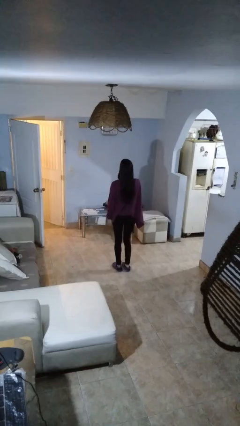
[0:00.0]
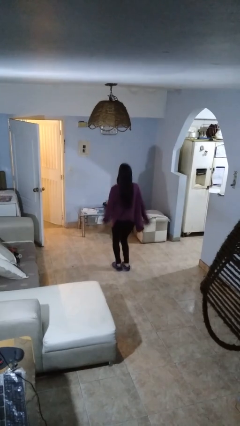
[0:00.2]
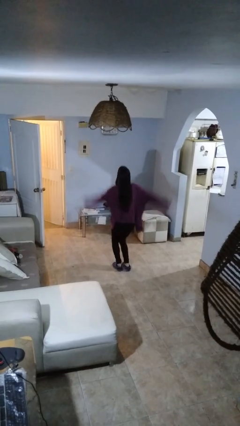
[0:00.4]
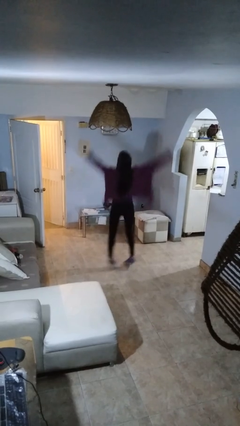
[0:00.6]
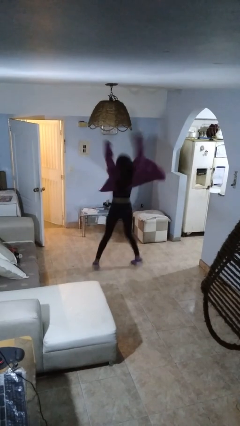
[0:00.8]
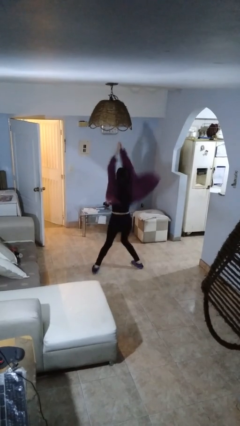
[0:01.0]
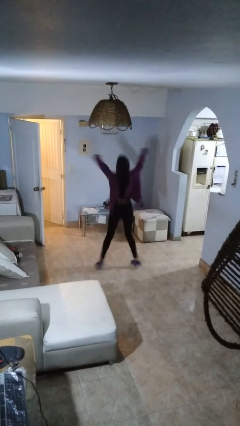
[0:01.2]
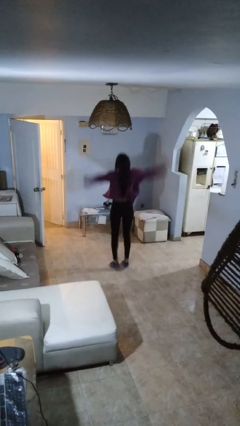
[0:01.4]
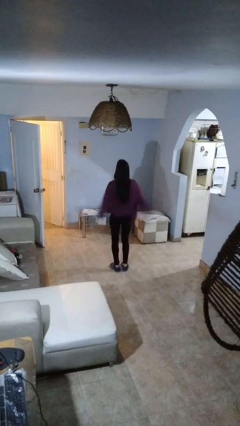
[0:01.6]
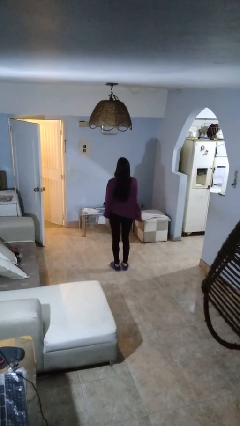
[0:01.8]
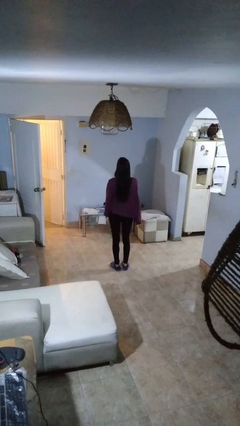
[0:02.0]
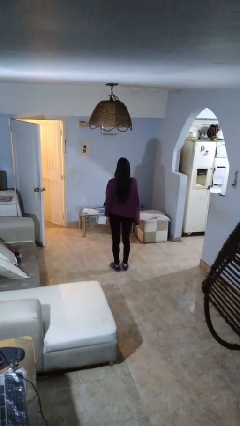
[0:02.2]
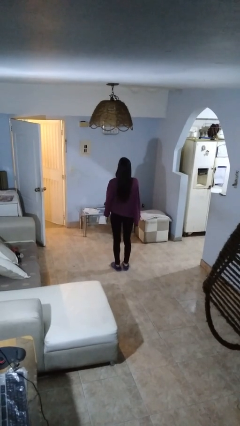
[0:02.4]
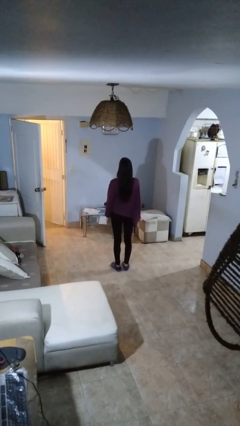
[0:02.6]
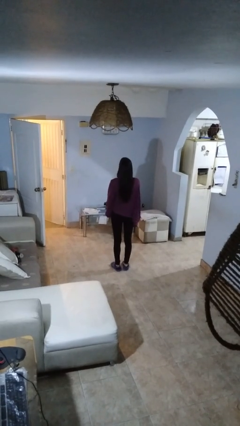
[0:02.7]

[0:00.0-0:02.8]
person exercises with jumping jacks

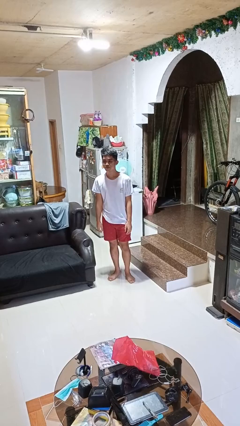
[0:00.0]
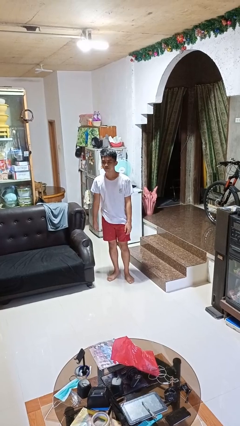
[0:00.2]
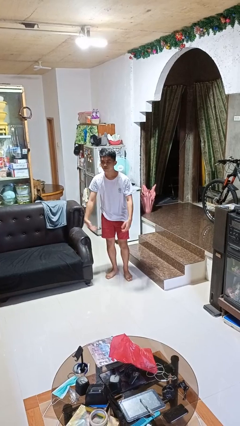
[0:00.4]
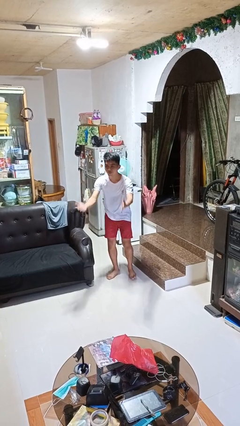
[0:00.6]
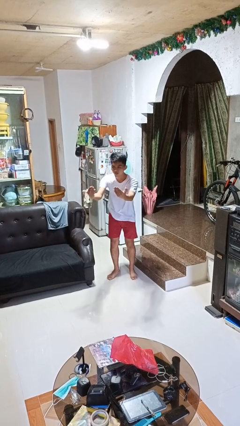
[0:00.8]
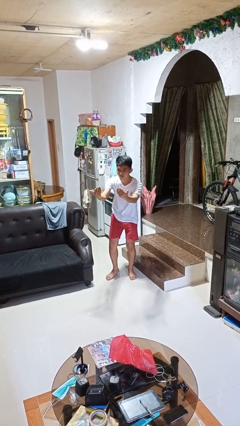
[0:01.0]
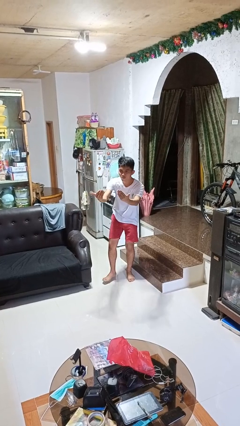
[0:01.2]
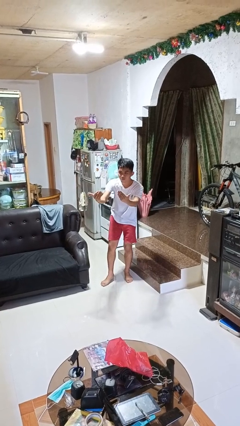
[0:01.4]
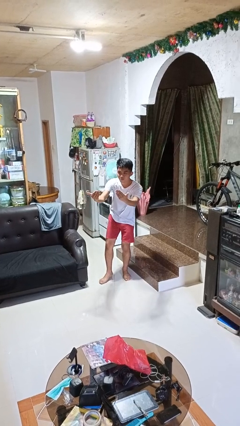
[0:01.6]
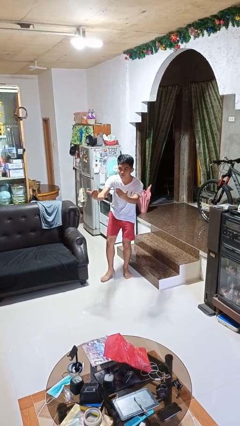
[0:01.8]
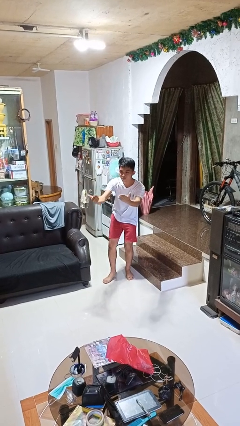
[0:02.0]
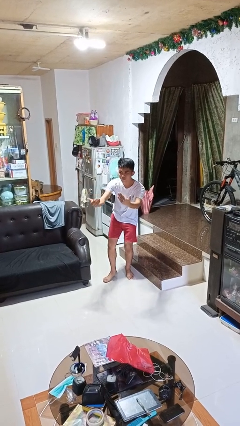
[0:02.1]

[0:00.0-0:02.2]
person gestures come here

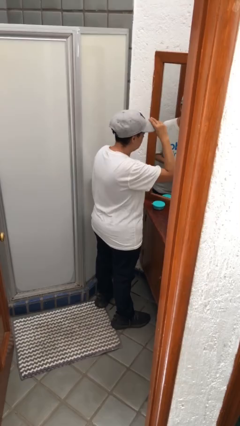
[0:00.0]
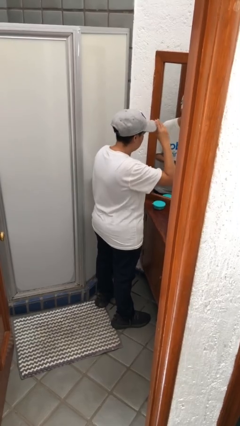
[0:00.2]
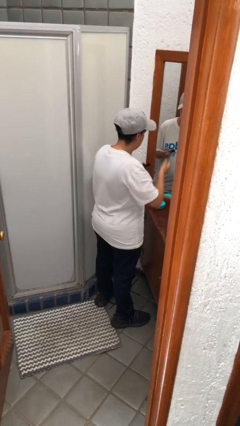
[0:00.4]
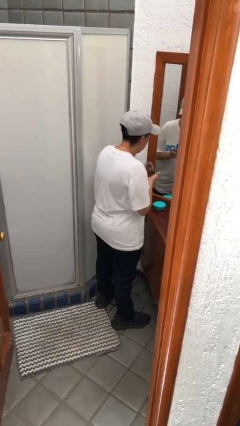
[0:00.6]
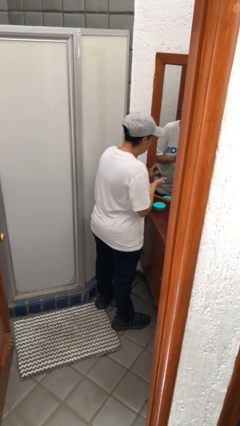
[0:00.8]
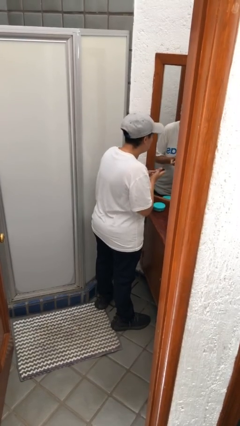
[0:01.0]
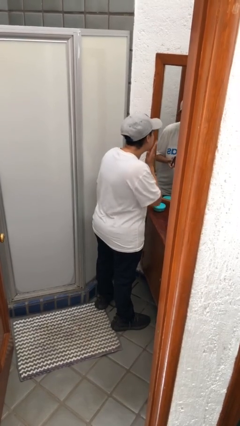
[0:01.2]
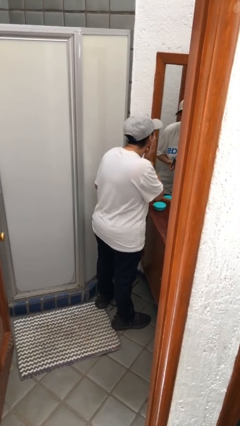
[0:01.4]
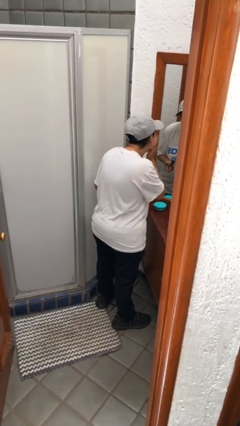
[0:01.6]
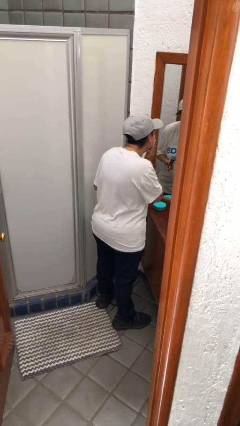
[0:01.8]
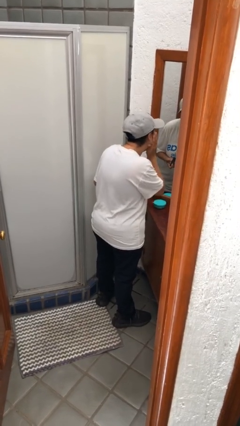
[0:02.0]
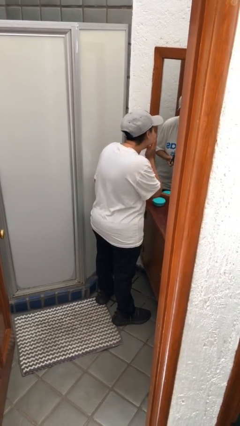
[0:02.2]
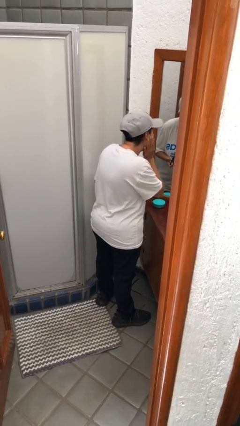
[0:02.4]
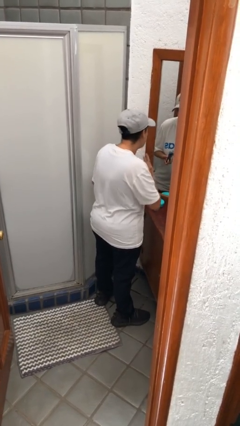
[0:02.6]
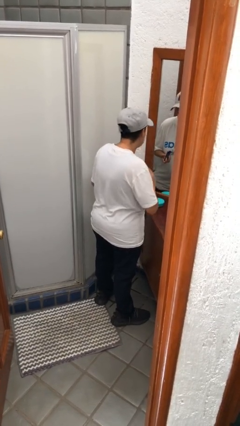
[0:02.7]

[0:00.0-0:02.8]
person applies facial moisturizer

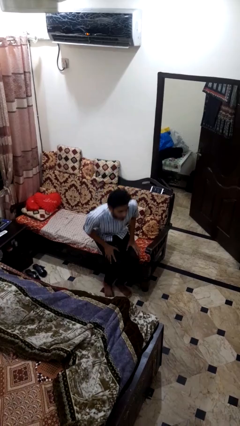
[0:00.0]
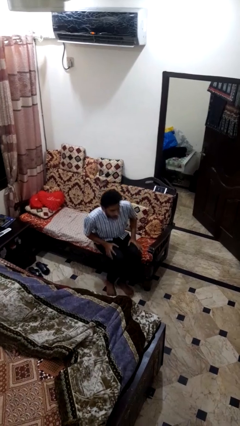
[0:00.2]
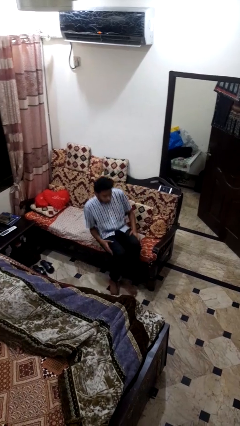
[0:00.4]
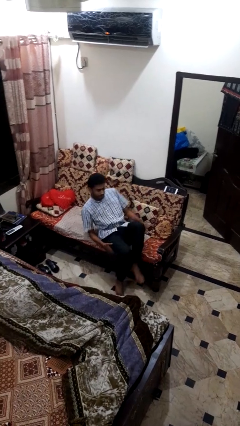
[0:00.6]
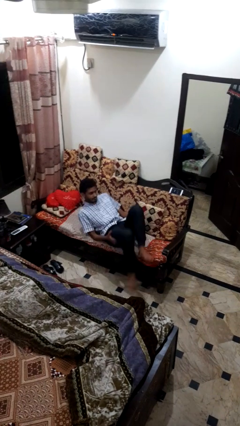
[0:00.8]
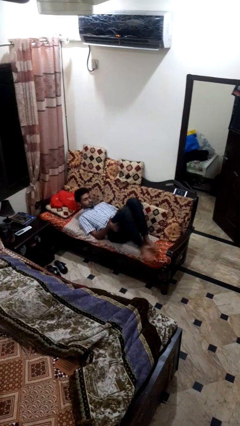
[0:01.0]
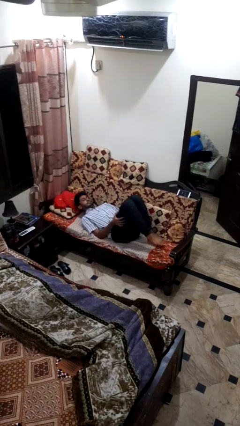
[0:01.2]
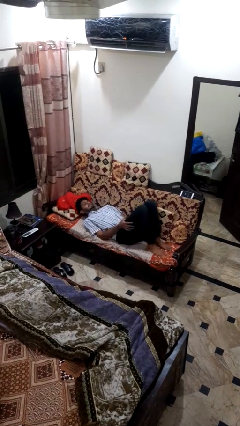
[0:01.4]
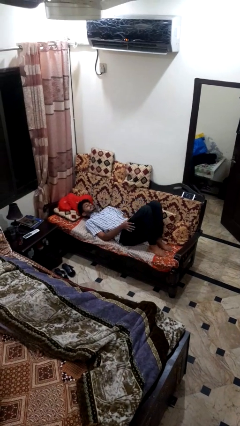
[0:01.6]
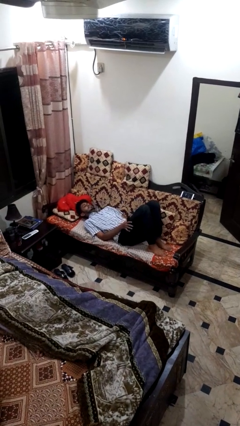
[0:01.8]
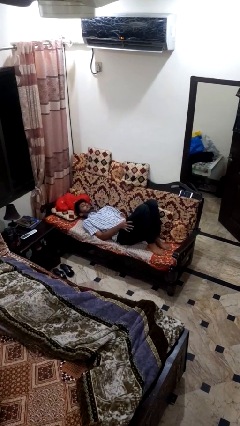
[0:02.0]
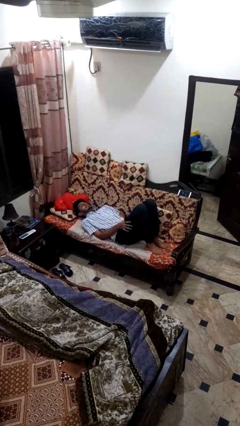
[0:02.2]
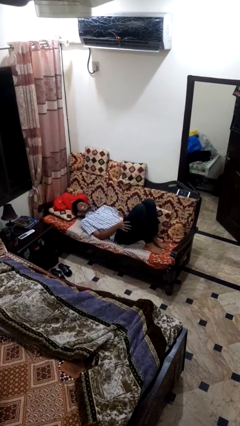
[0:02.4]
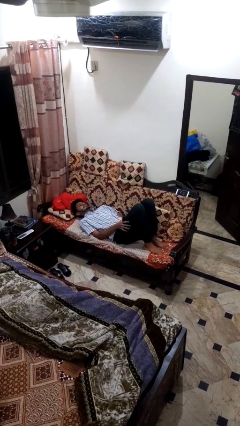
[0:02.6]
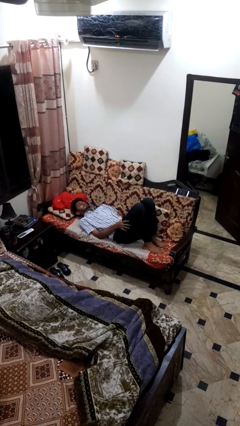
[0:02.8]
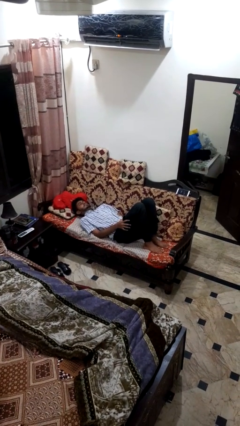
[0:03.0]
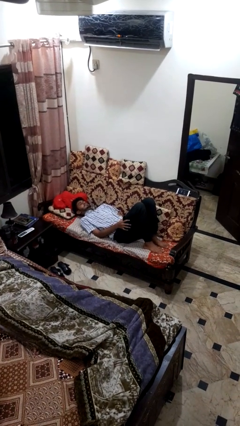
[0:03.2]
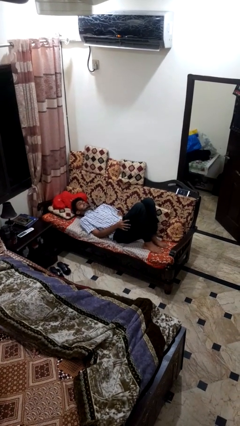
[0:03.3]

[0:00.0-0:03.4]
person lies down on couch

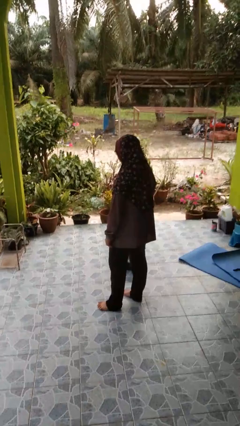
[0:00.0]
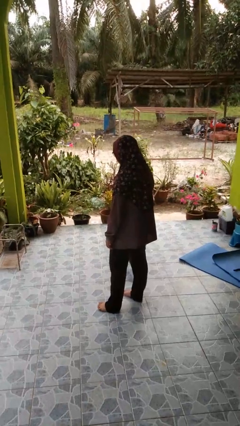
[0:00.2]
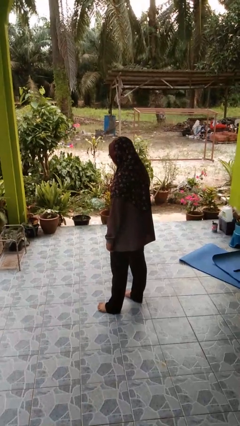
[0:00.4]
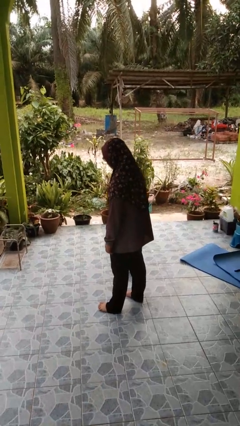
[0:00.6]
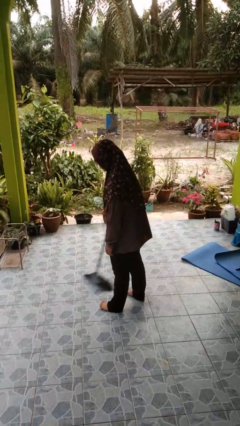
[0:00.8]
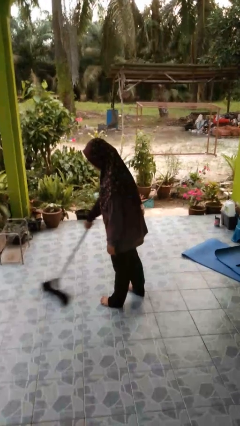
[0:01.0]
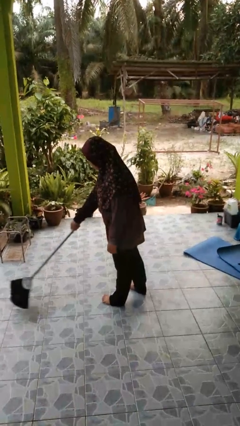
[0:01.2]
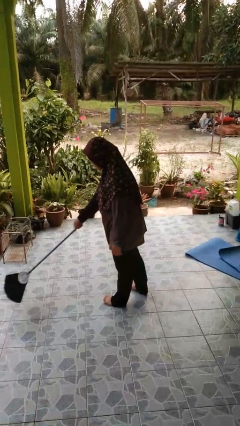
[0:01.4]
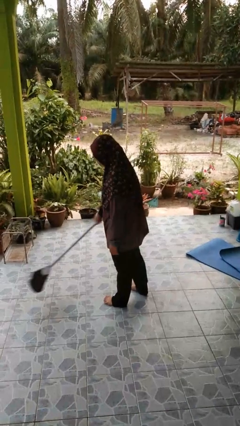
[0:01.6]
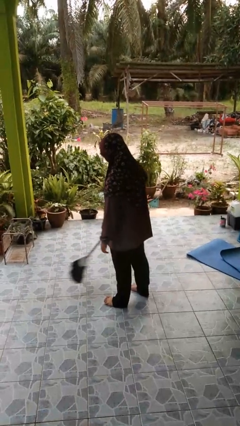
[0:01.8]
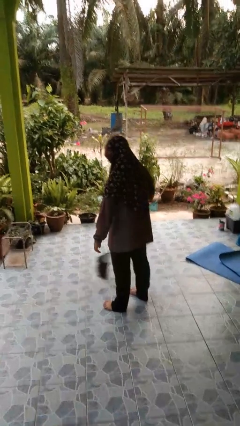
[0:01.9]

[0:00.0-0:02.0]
person sweeps floor

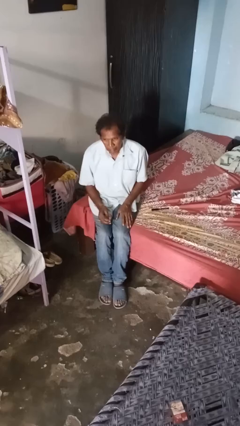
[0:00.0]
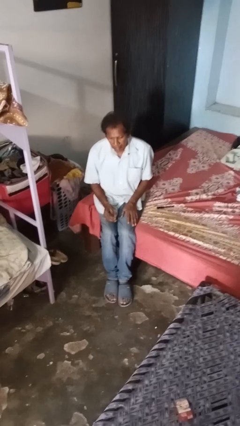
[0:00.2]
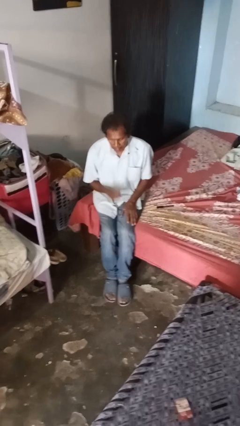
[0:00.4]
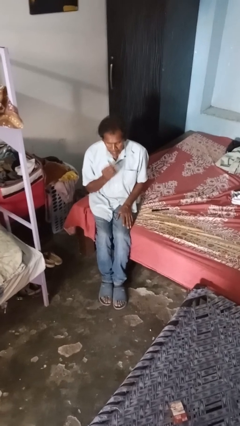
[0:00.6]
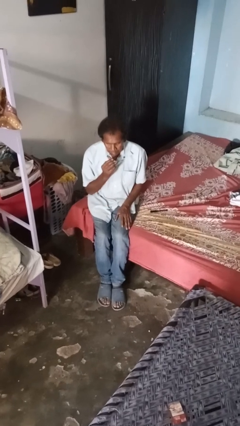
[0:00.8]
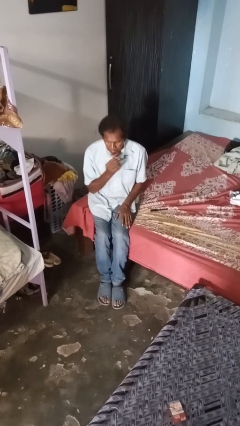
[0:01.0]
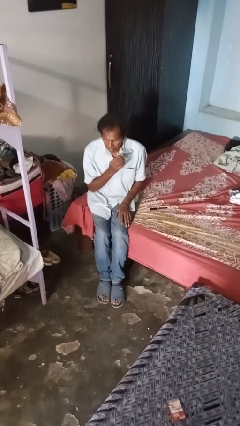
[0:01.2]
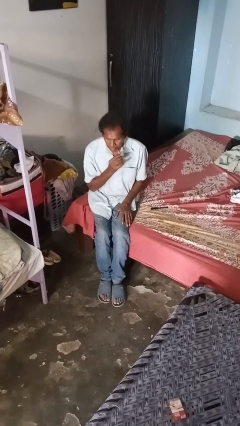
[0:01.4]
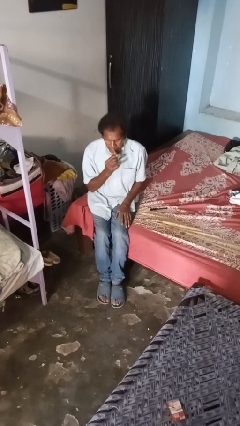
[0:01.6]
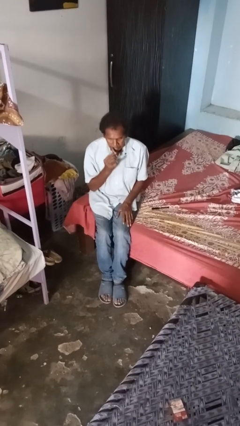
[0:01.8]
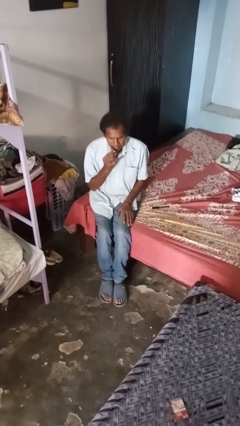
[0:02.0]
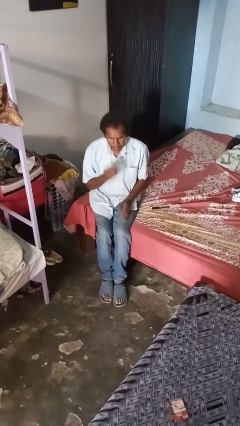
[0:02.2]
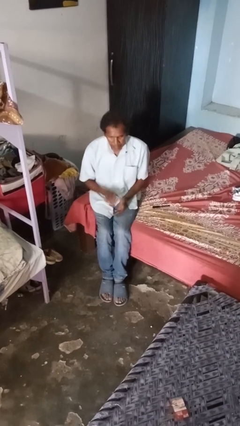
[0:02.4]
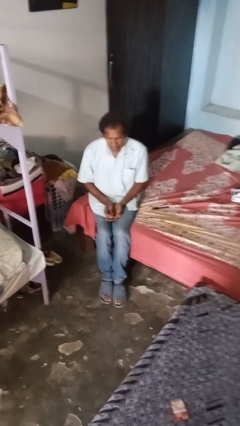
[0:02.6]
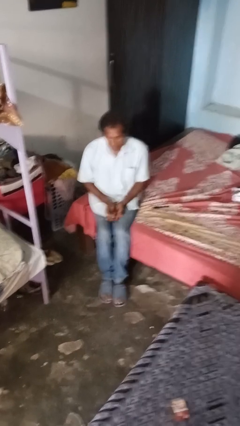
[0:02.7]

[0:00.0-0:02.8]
person applies lip makeup

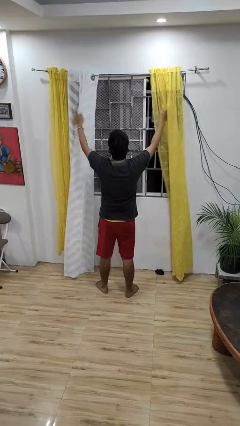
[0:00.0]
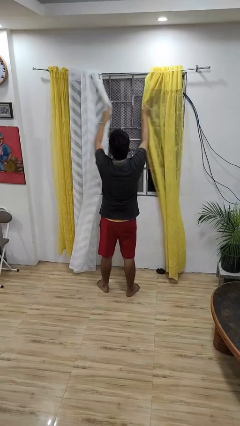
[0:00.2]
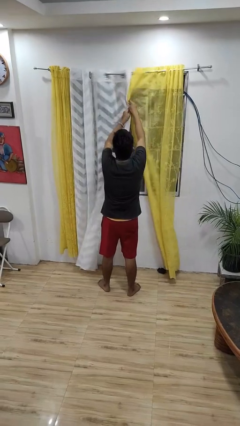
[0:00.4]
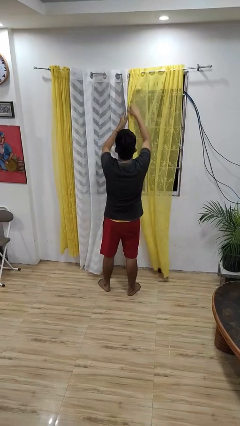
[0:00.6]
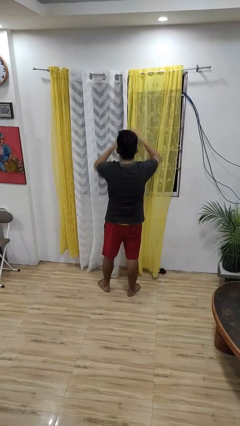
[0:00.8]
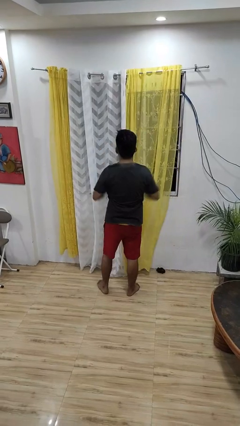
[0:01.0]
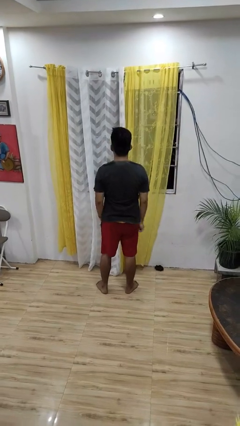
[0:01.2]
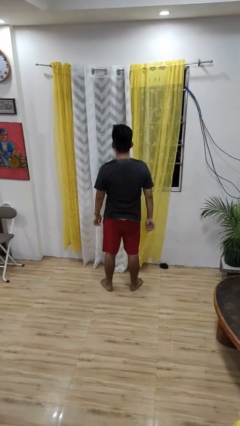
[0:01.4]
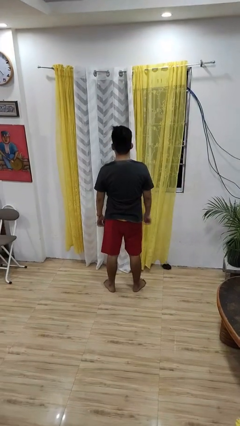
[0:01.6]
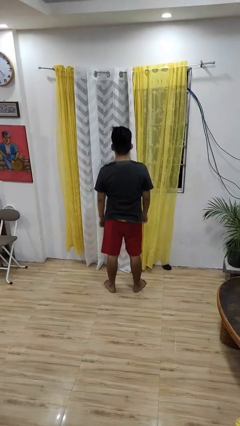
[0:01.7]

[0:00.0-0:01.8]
person closes curtains
